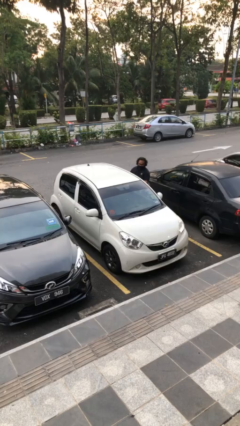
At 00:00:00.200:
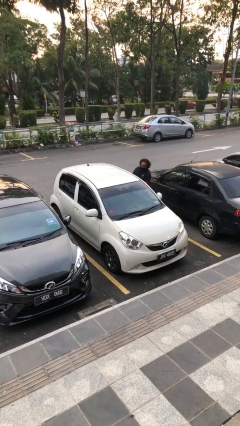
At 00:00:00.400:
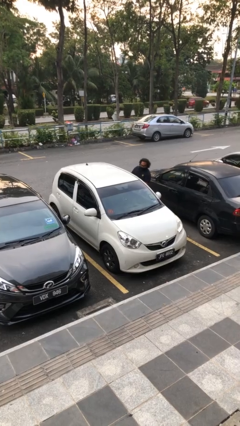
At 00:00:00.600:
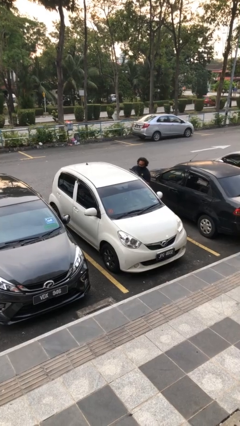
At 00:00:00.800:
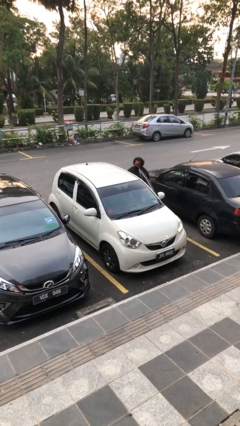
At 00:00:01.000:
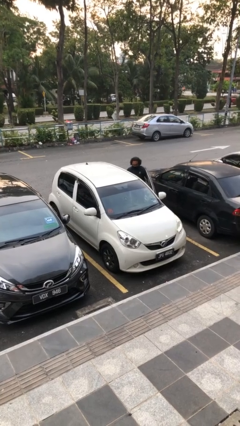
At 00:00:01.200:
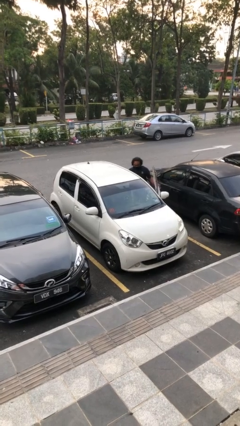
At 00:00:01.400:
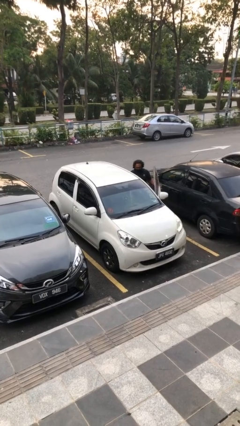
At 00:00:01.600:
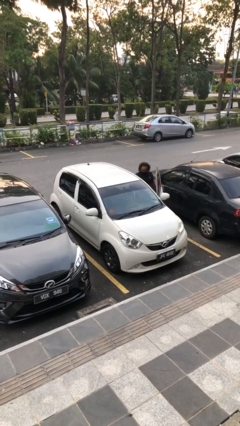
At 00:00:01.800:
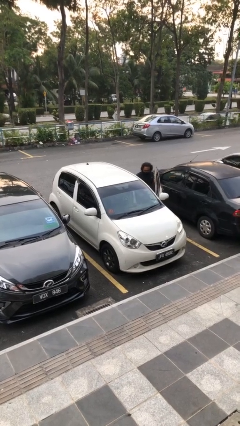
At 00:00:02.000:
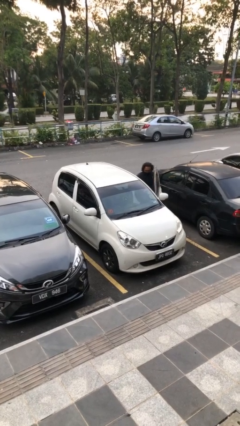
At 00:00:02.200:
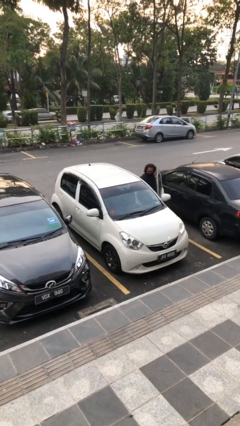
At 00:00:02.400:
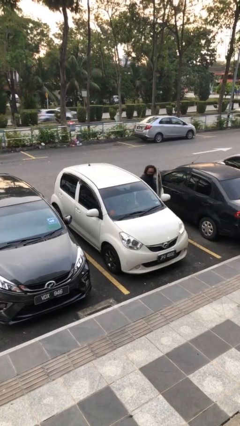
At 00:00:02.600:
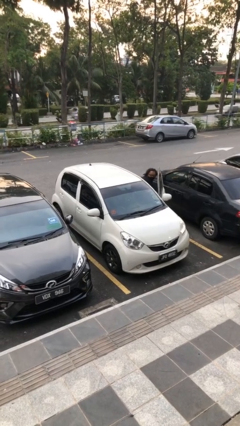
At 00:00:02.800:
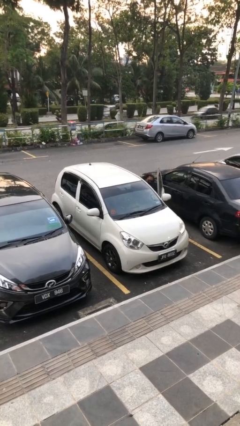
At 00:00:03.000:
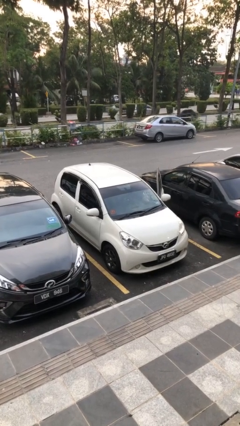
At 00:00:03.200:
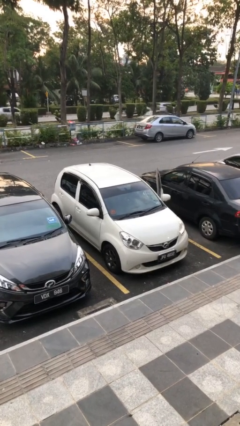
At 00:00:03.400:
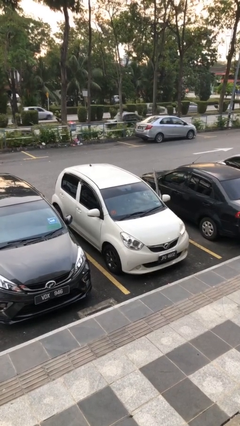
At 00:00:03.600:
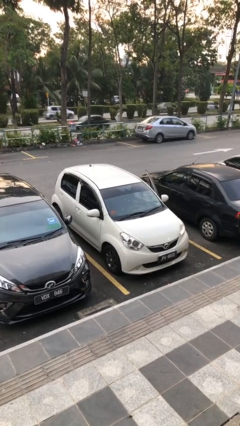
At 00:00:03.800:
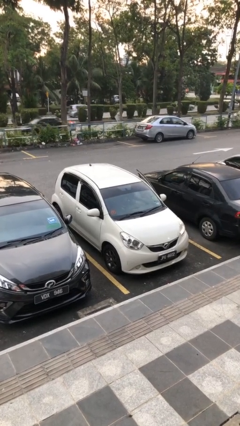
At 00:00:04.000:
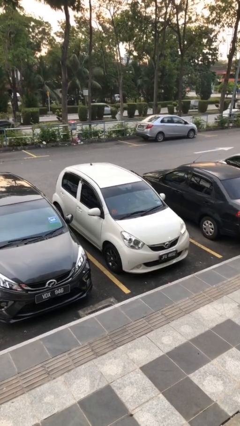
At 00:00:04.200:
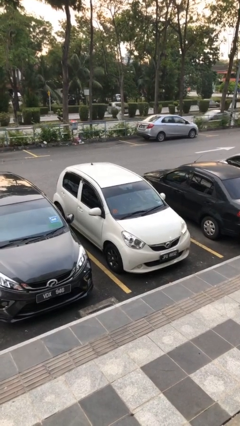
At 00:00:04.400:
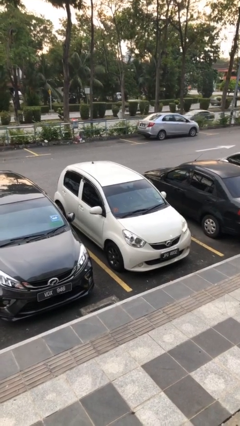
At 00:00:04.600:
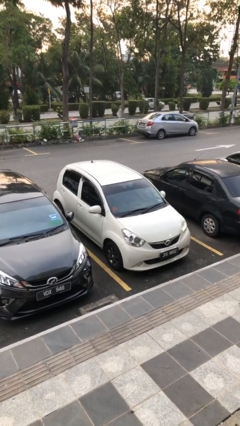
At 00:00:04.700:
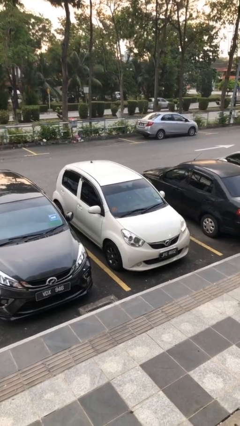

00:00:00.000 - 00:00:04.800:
car picks up person

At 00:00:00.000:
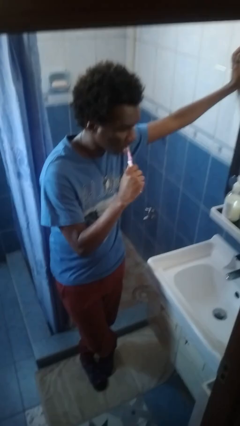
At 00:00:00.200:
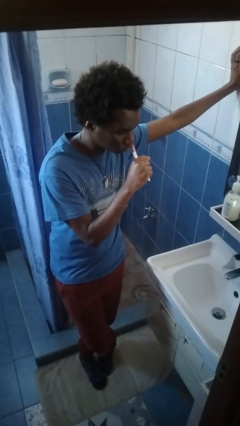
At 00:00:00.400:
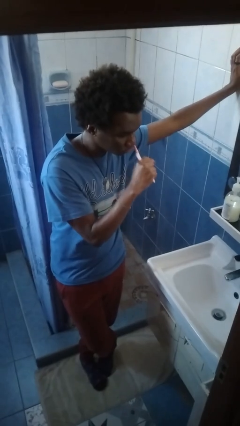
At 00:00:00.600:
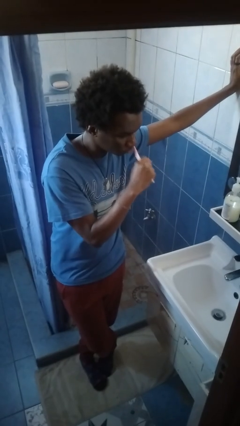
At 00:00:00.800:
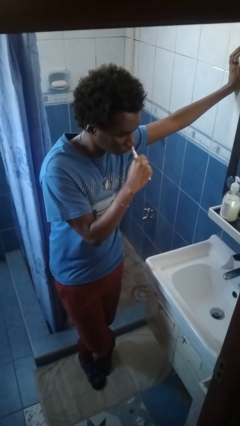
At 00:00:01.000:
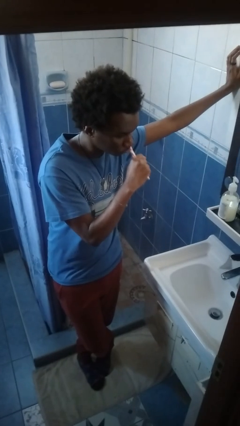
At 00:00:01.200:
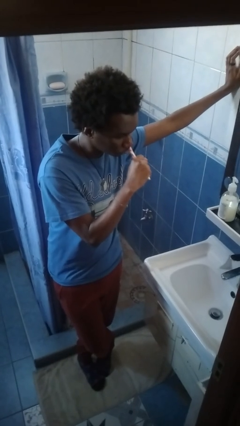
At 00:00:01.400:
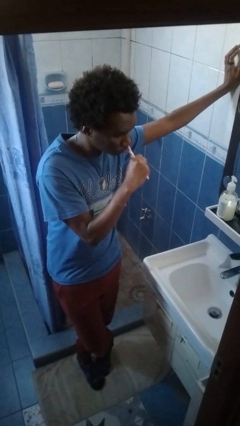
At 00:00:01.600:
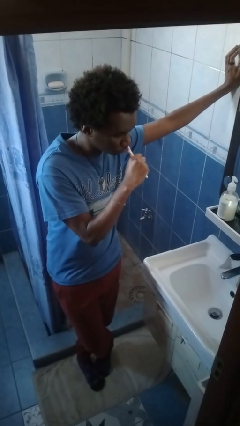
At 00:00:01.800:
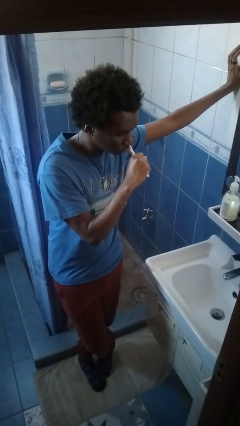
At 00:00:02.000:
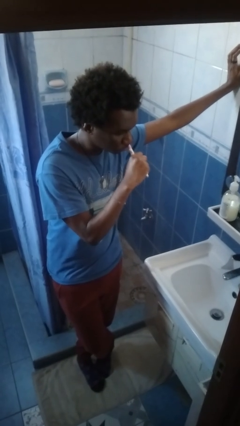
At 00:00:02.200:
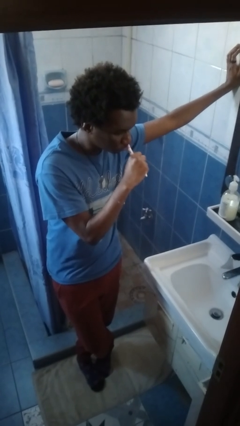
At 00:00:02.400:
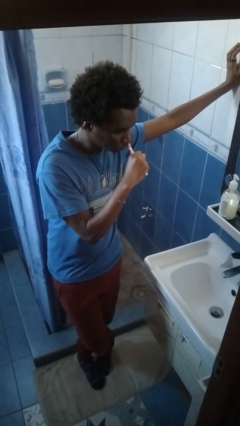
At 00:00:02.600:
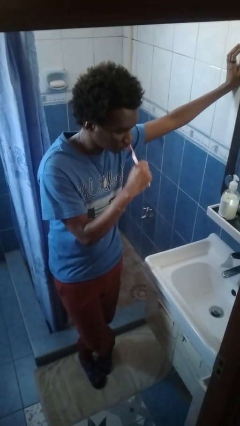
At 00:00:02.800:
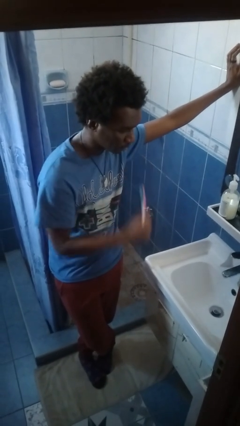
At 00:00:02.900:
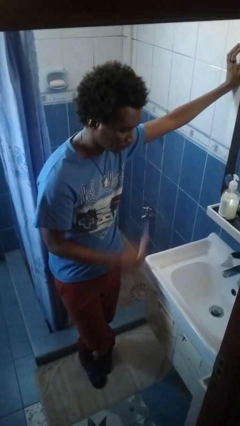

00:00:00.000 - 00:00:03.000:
person brushes teeth

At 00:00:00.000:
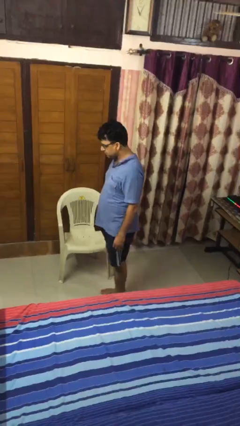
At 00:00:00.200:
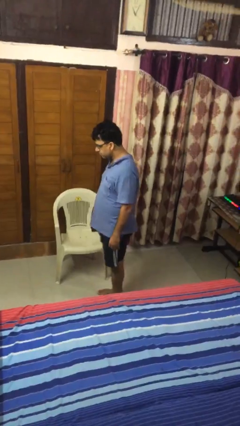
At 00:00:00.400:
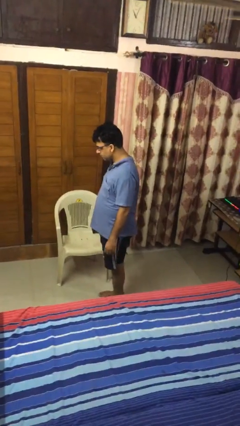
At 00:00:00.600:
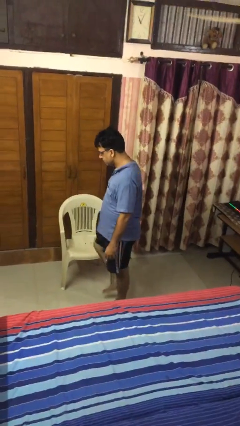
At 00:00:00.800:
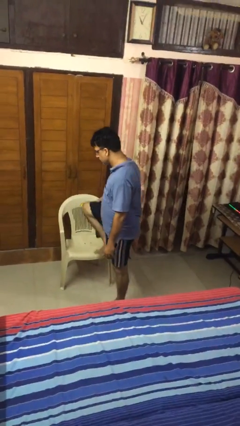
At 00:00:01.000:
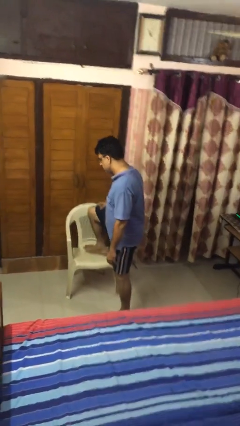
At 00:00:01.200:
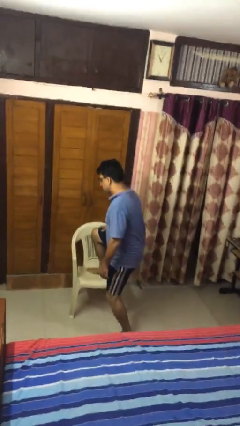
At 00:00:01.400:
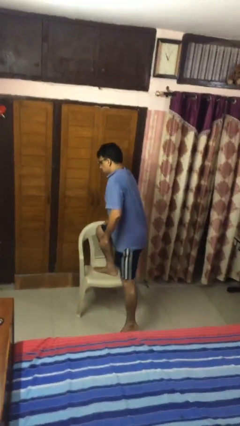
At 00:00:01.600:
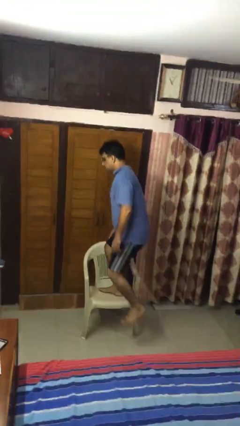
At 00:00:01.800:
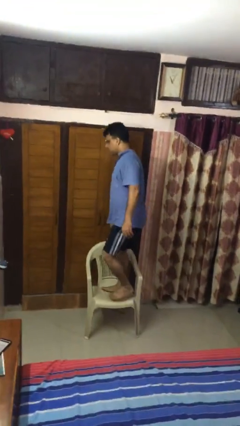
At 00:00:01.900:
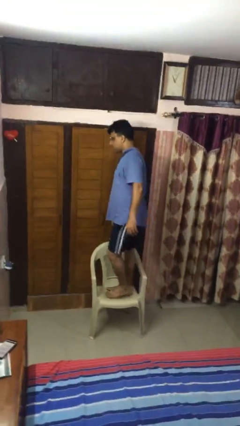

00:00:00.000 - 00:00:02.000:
person climbs on chair

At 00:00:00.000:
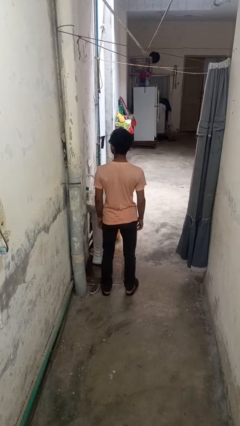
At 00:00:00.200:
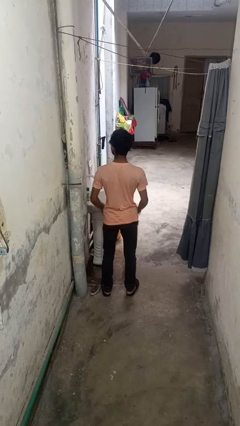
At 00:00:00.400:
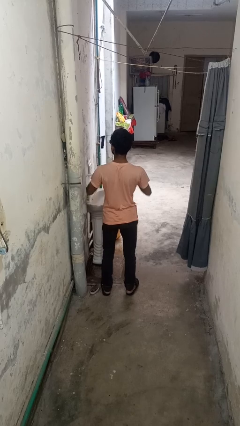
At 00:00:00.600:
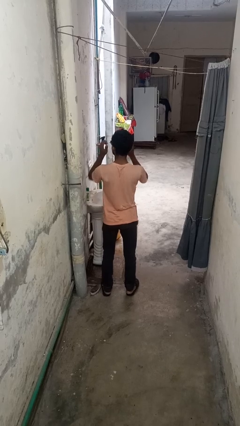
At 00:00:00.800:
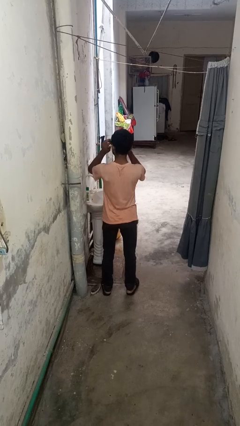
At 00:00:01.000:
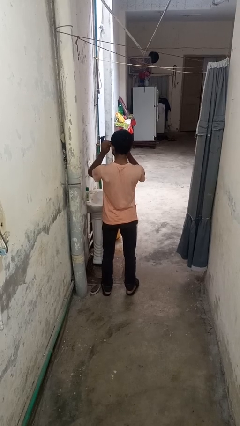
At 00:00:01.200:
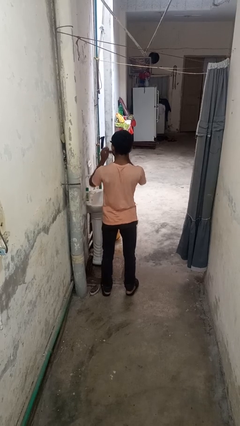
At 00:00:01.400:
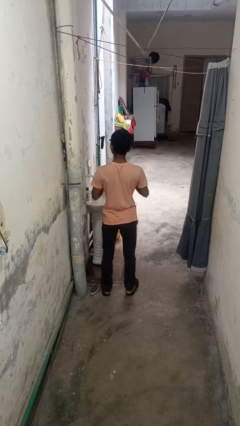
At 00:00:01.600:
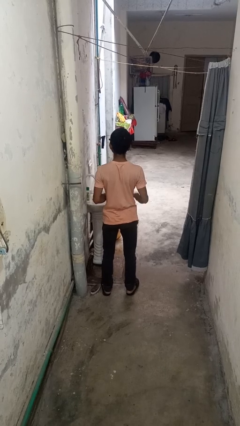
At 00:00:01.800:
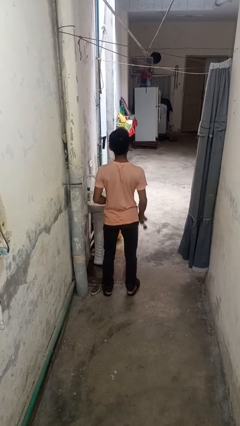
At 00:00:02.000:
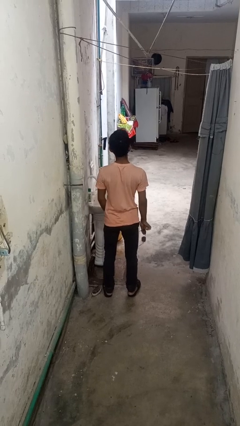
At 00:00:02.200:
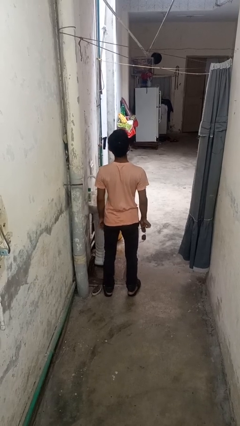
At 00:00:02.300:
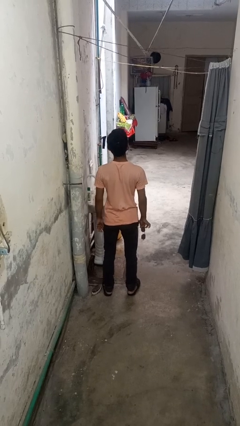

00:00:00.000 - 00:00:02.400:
person takes off sunglasses

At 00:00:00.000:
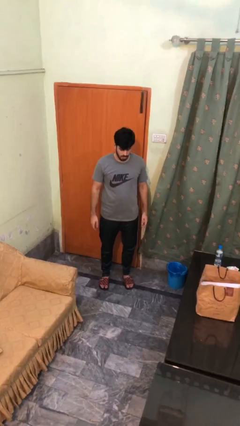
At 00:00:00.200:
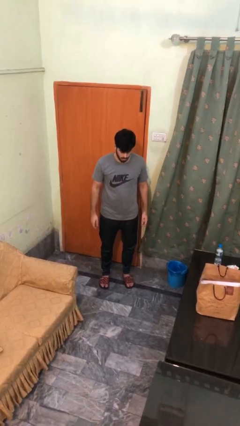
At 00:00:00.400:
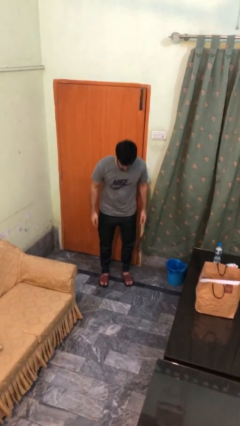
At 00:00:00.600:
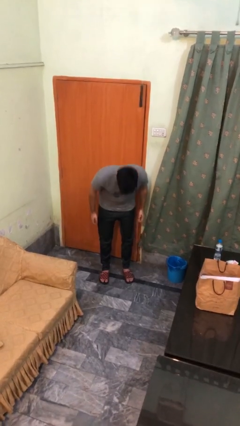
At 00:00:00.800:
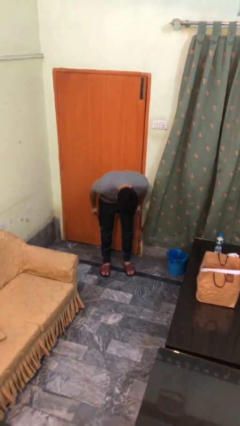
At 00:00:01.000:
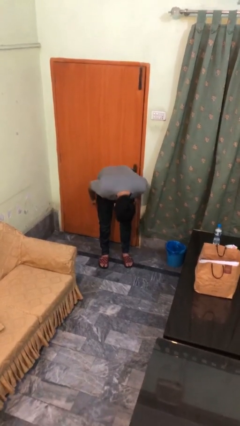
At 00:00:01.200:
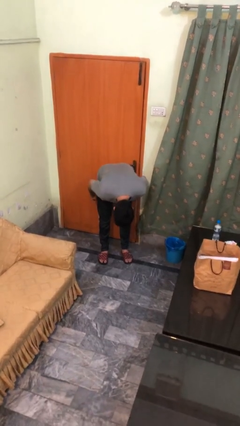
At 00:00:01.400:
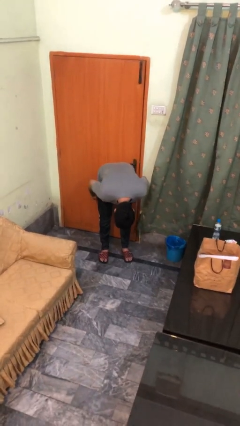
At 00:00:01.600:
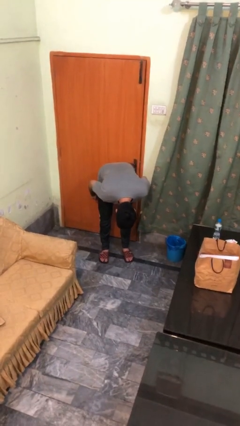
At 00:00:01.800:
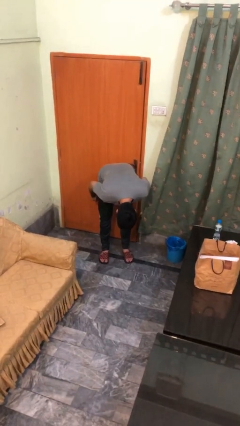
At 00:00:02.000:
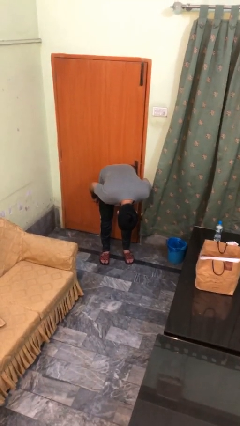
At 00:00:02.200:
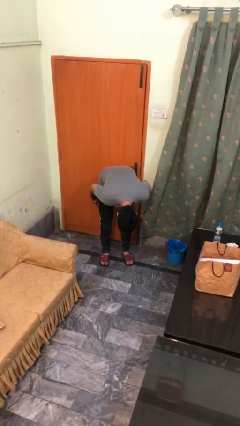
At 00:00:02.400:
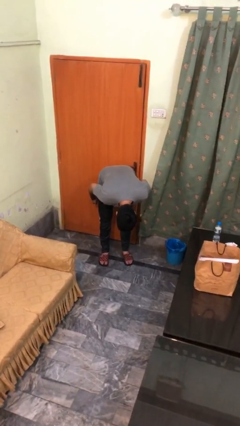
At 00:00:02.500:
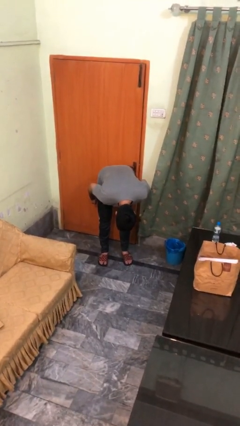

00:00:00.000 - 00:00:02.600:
person bows

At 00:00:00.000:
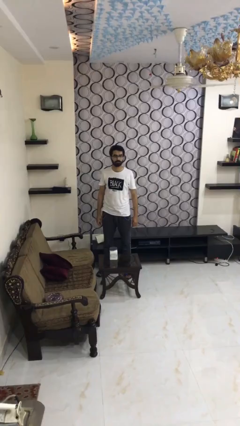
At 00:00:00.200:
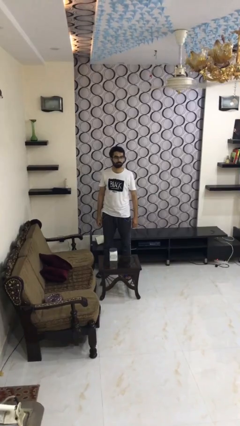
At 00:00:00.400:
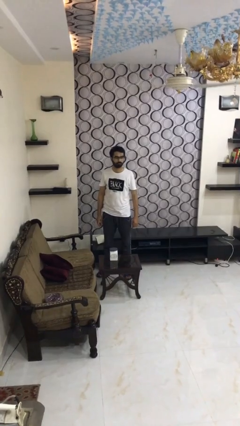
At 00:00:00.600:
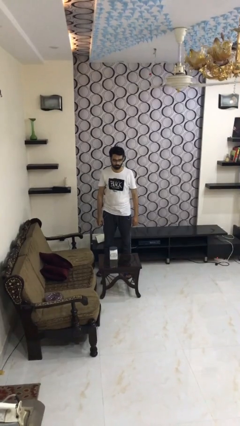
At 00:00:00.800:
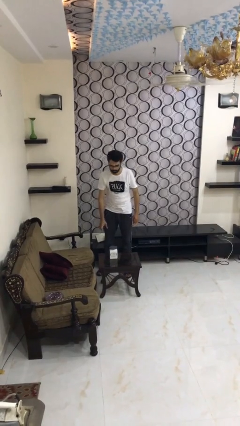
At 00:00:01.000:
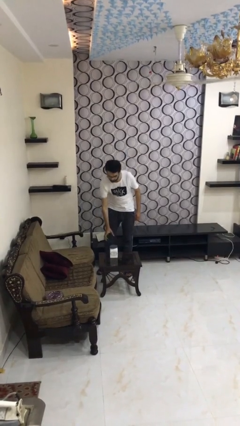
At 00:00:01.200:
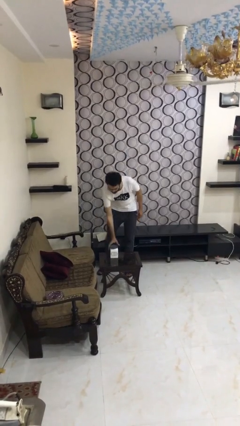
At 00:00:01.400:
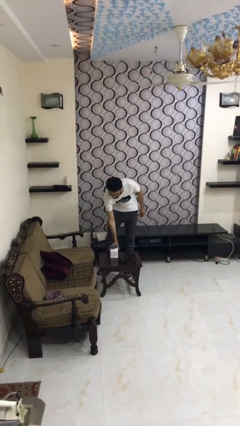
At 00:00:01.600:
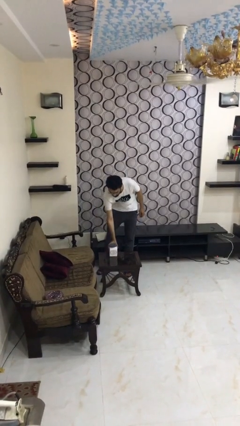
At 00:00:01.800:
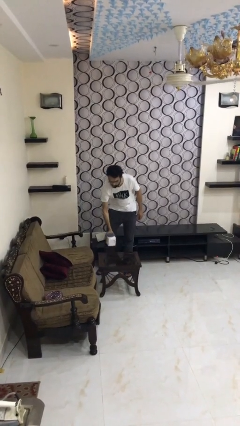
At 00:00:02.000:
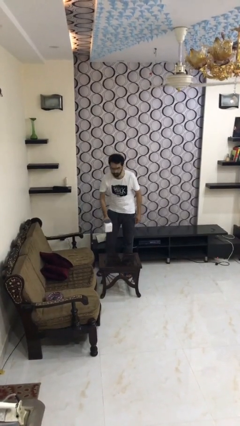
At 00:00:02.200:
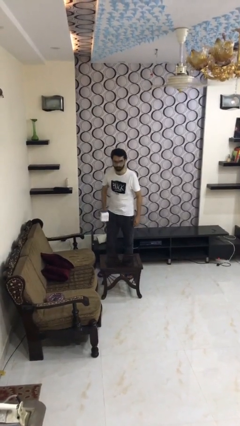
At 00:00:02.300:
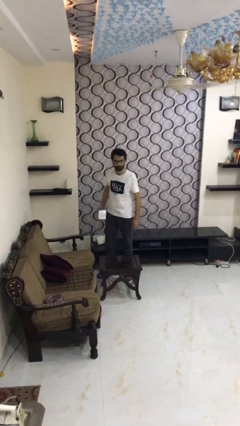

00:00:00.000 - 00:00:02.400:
person picks up object from table

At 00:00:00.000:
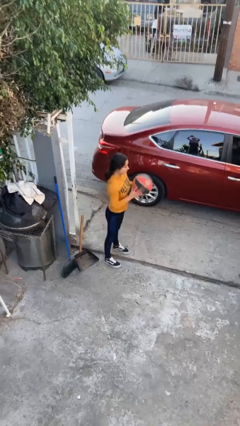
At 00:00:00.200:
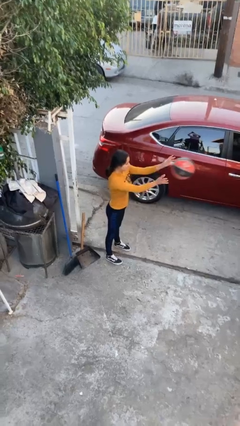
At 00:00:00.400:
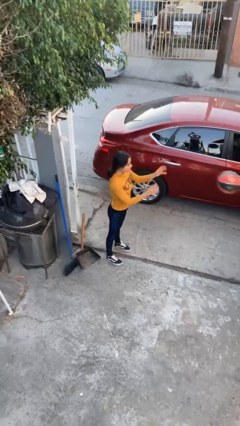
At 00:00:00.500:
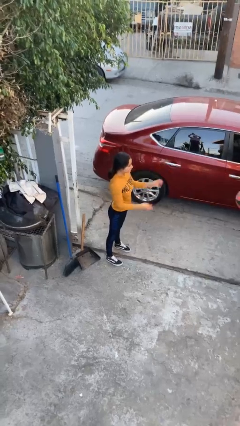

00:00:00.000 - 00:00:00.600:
person throws object to person
